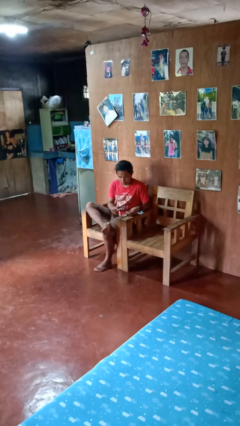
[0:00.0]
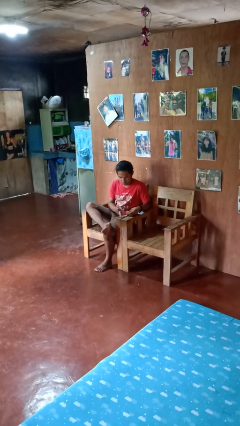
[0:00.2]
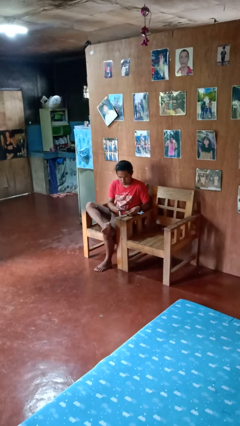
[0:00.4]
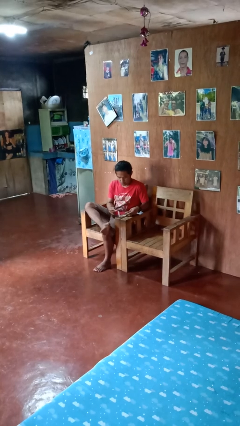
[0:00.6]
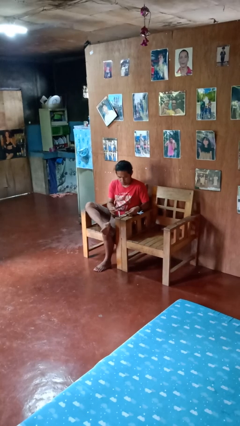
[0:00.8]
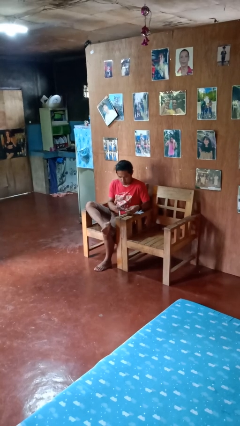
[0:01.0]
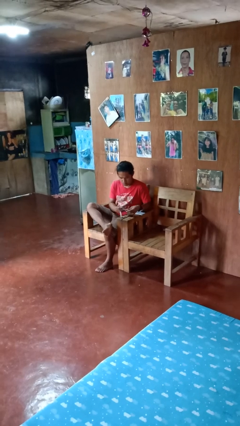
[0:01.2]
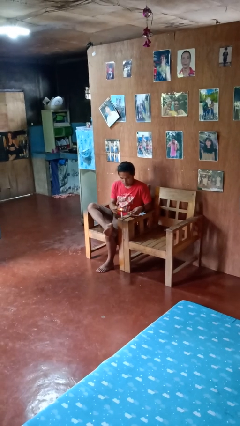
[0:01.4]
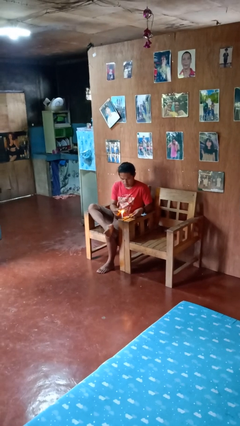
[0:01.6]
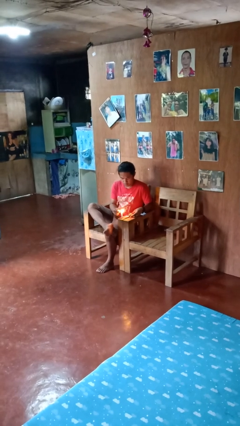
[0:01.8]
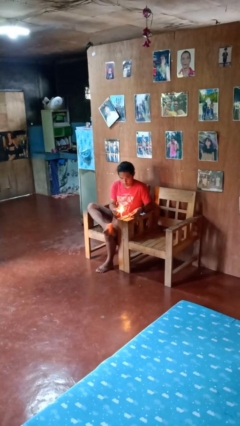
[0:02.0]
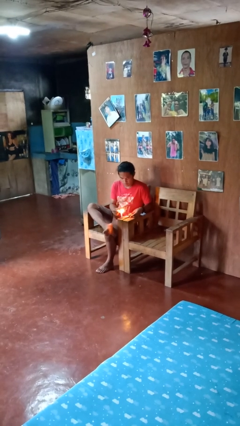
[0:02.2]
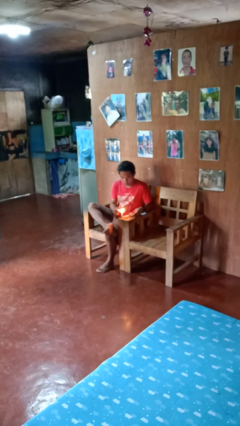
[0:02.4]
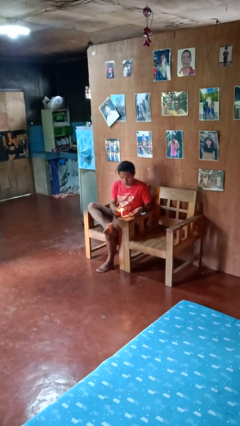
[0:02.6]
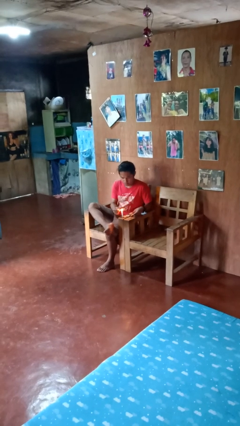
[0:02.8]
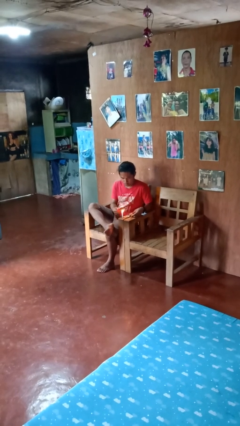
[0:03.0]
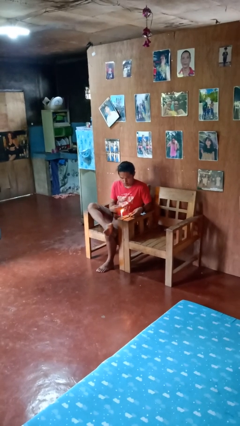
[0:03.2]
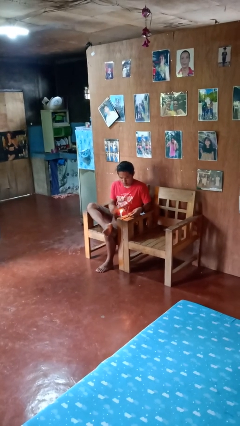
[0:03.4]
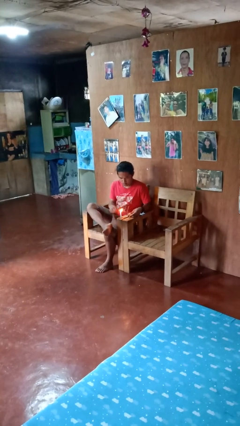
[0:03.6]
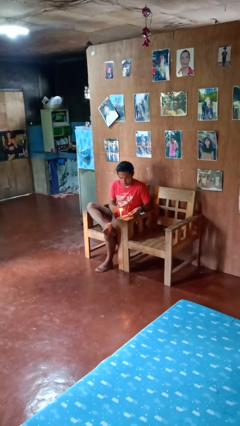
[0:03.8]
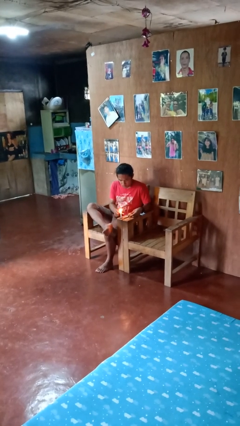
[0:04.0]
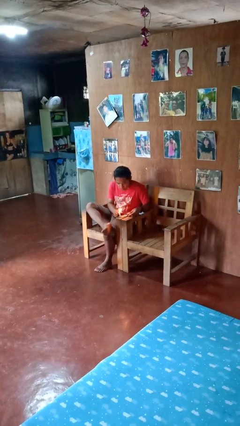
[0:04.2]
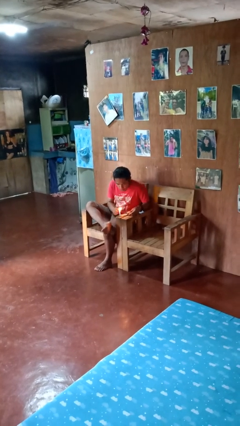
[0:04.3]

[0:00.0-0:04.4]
person lights candle

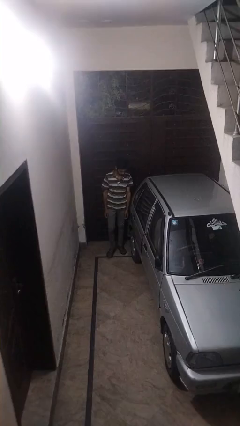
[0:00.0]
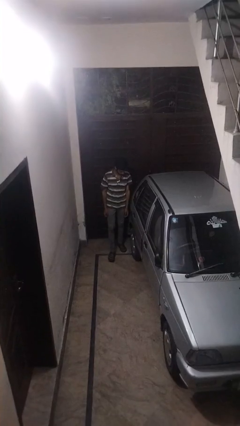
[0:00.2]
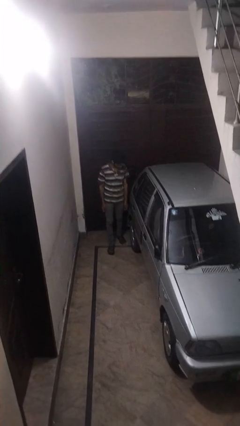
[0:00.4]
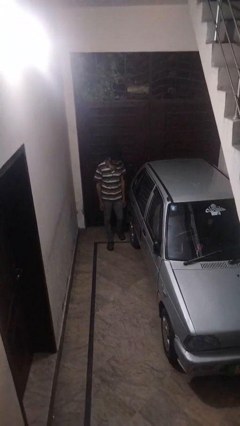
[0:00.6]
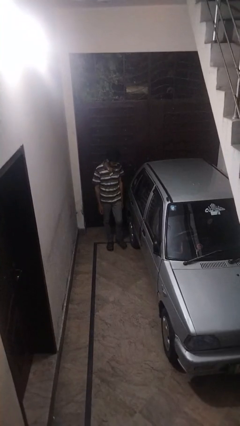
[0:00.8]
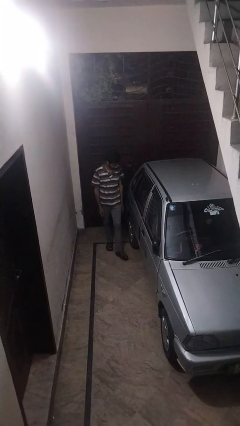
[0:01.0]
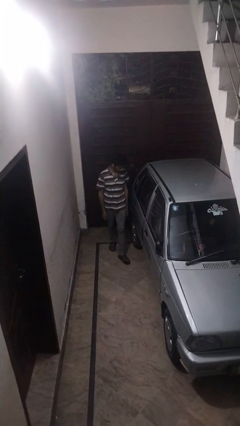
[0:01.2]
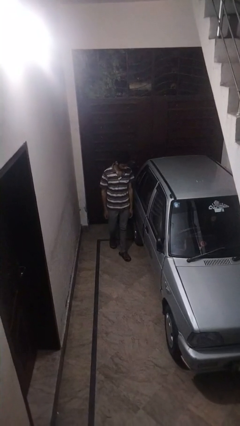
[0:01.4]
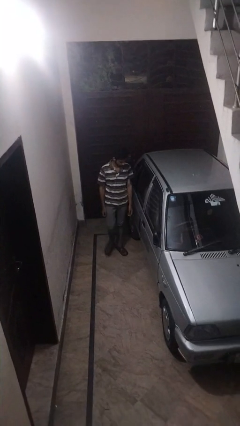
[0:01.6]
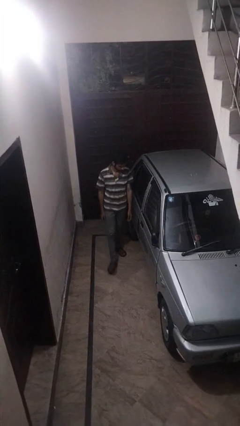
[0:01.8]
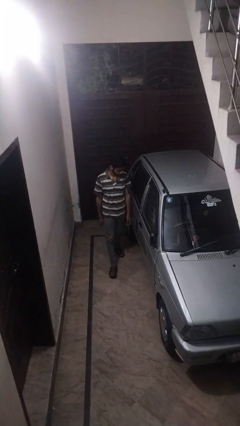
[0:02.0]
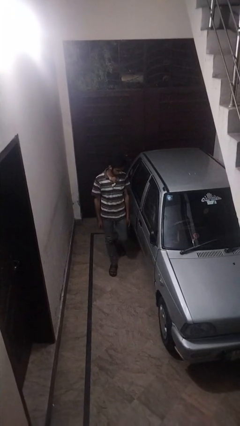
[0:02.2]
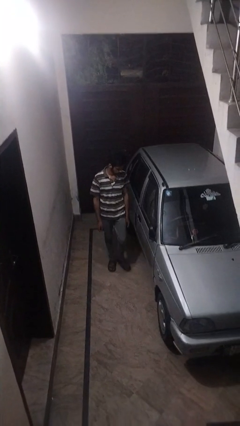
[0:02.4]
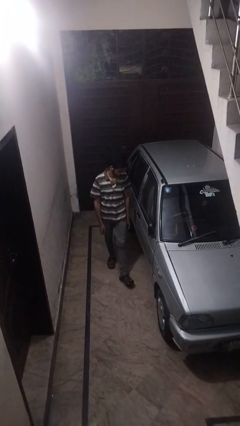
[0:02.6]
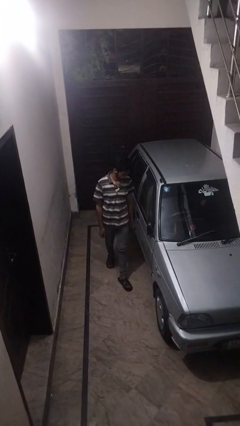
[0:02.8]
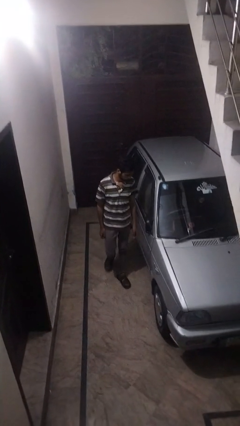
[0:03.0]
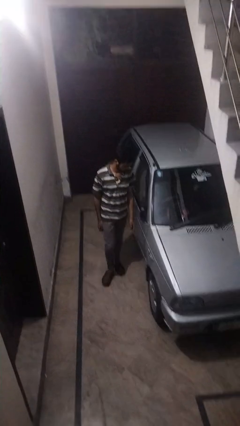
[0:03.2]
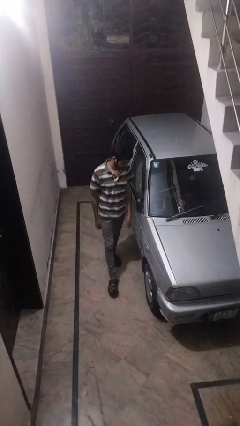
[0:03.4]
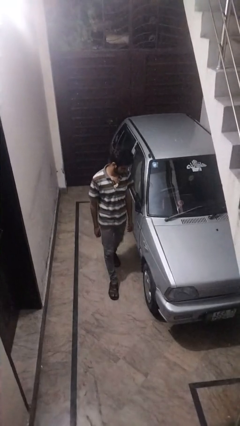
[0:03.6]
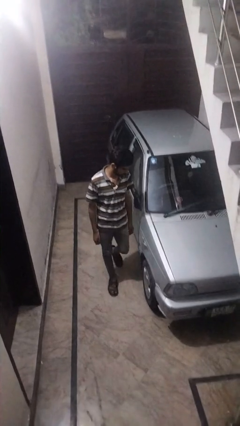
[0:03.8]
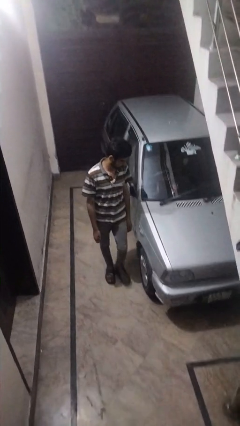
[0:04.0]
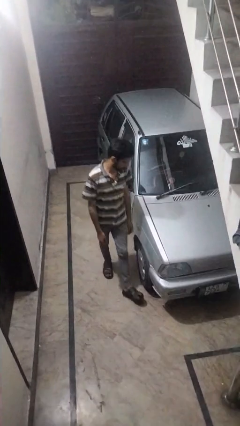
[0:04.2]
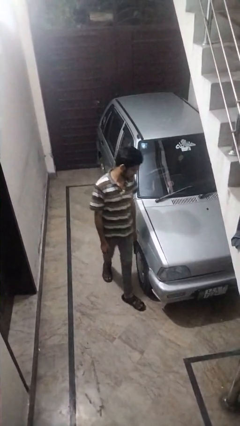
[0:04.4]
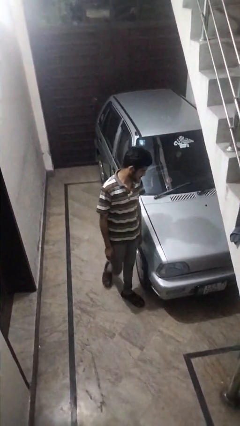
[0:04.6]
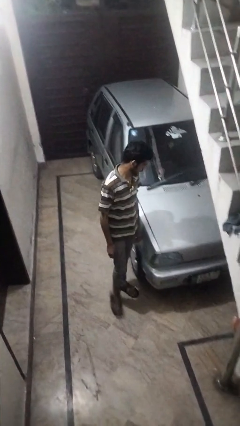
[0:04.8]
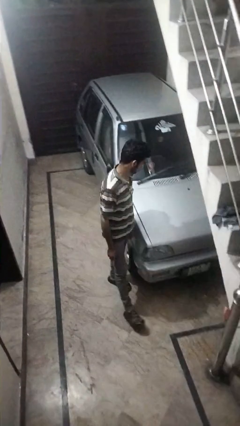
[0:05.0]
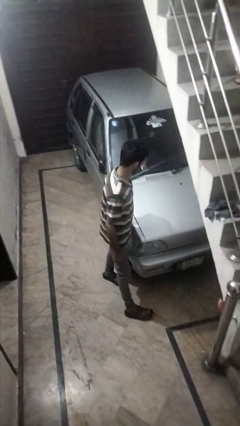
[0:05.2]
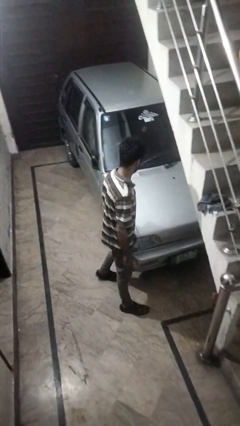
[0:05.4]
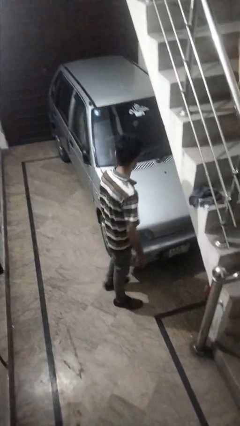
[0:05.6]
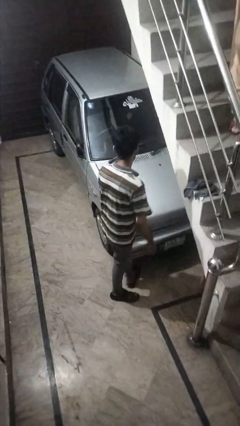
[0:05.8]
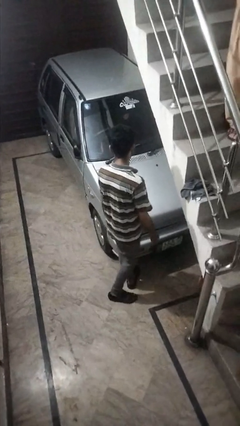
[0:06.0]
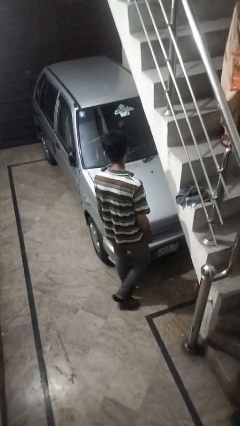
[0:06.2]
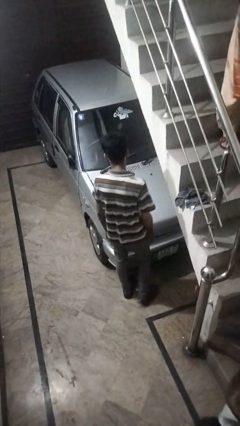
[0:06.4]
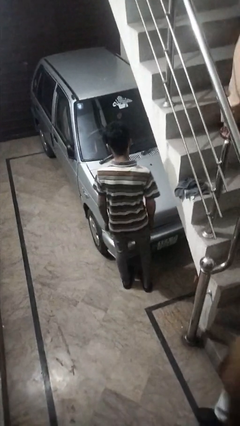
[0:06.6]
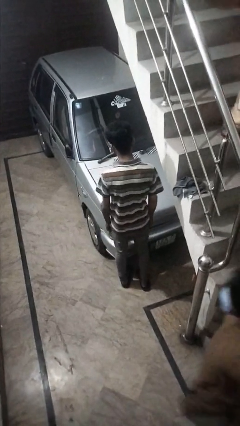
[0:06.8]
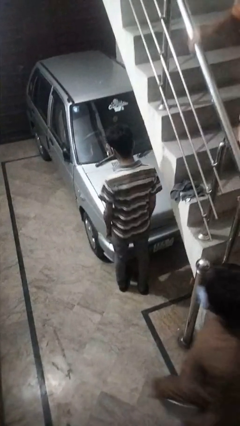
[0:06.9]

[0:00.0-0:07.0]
person walks around car

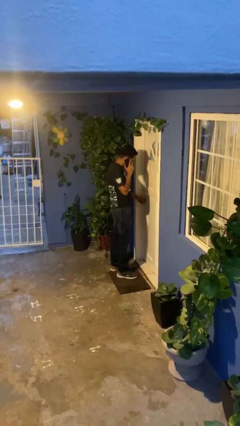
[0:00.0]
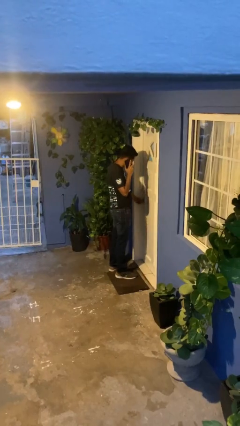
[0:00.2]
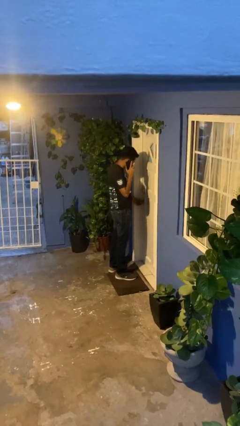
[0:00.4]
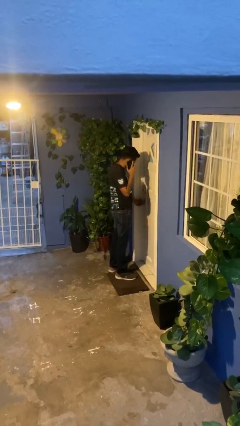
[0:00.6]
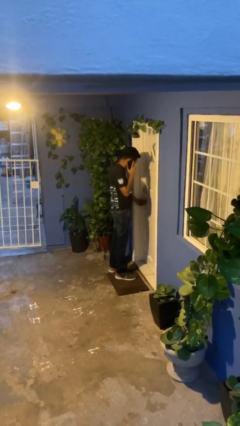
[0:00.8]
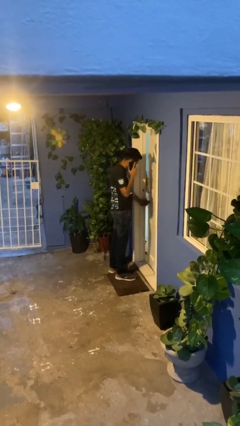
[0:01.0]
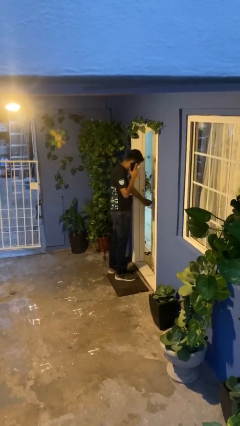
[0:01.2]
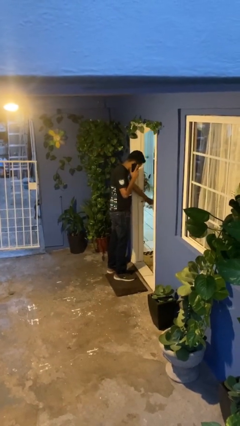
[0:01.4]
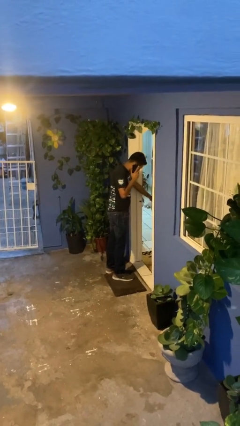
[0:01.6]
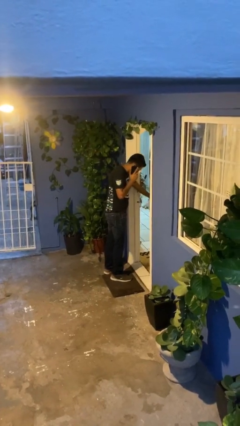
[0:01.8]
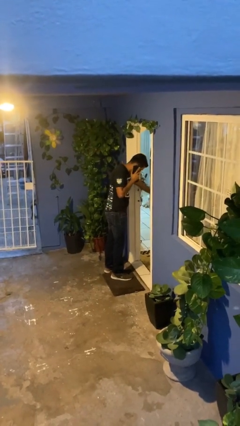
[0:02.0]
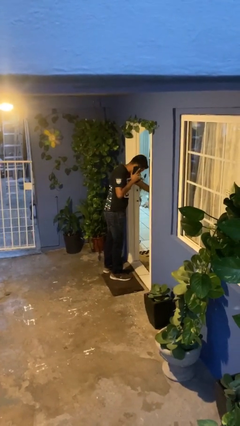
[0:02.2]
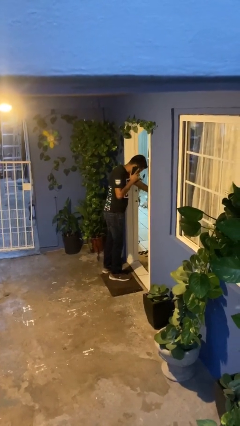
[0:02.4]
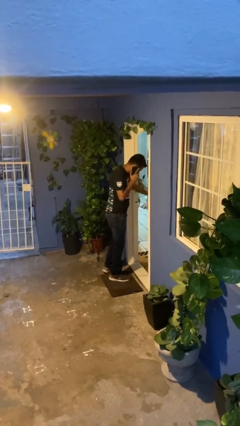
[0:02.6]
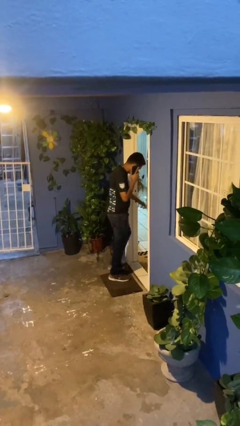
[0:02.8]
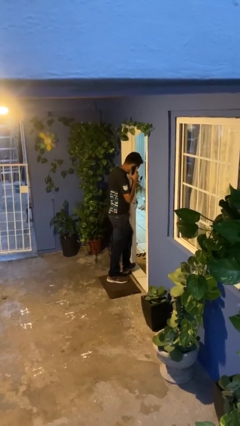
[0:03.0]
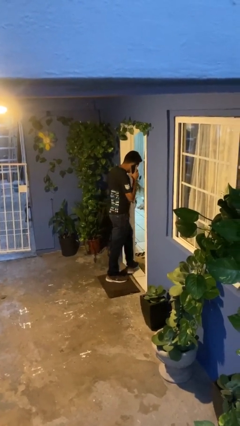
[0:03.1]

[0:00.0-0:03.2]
person opens facility door

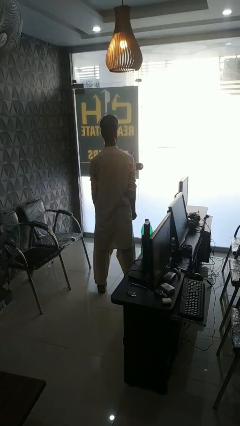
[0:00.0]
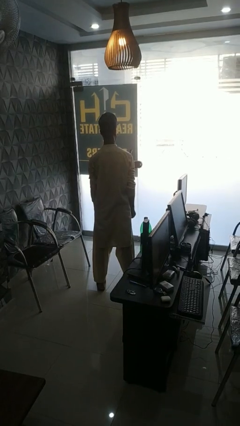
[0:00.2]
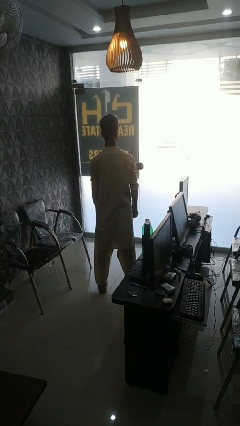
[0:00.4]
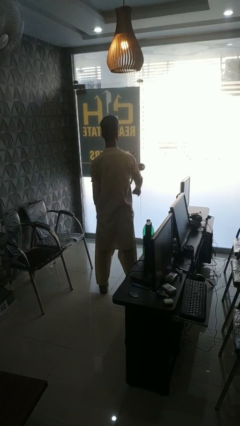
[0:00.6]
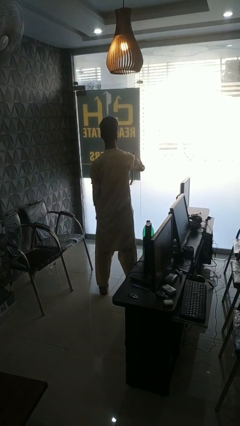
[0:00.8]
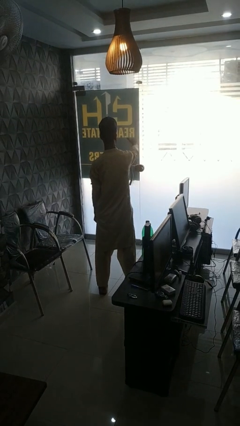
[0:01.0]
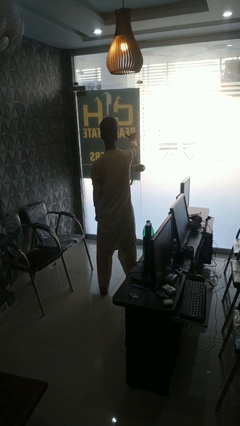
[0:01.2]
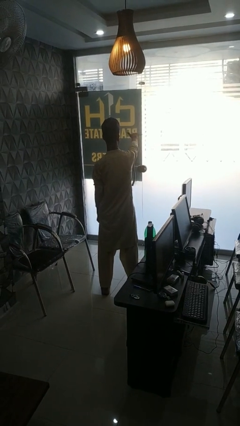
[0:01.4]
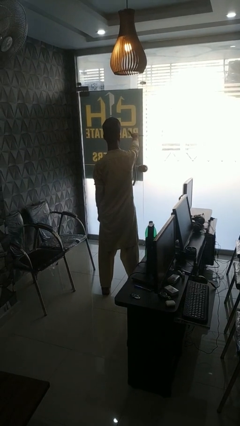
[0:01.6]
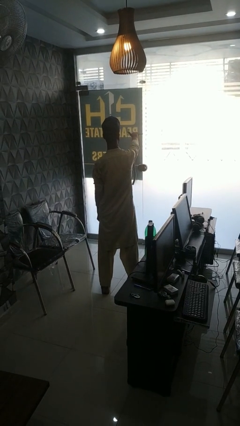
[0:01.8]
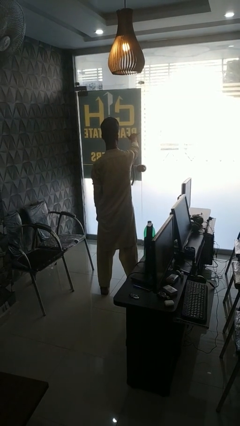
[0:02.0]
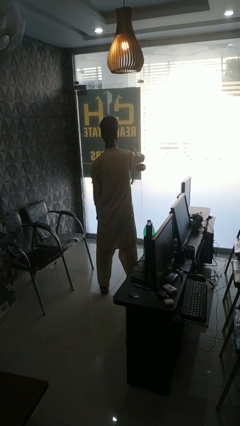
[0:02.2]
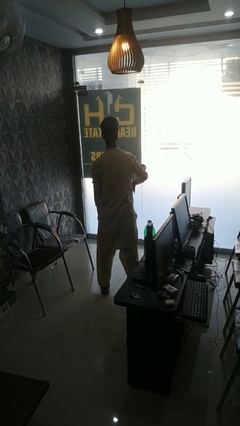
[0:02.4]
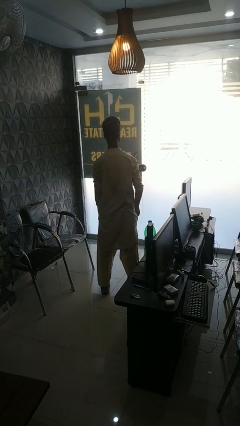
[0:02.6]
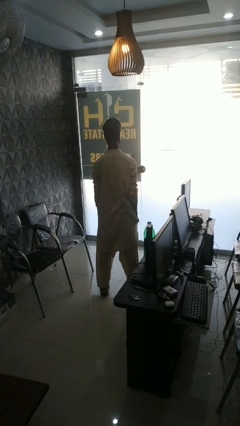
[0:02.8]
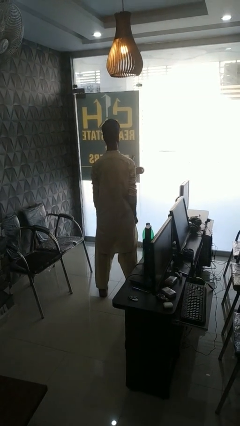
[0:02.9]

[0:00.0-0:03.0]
person gestures hang loose

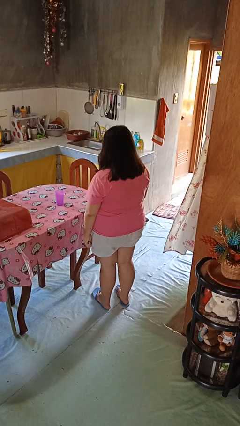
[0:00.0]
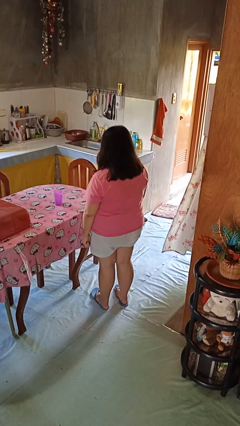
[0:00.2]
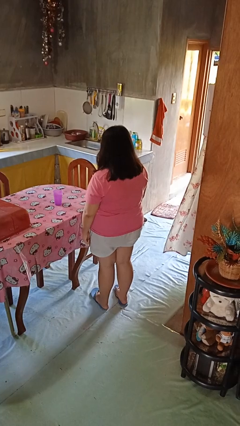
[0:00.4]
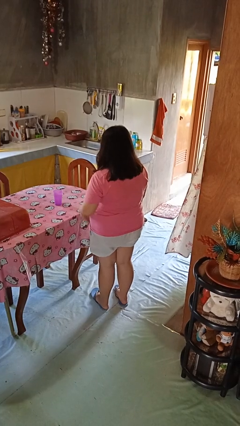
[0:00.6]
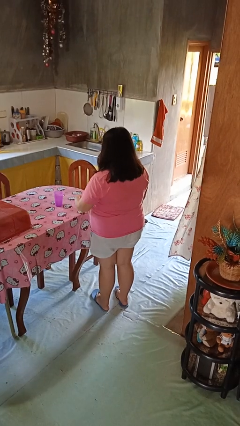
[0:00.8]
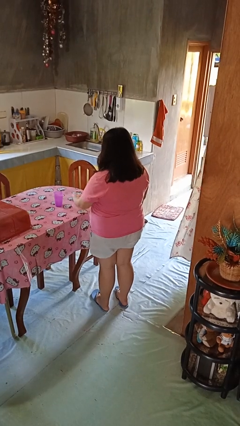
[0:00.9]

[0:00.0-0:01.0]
person knocks over glass
